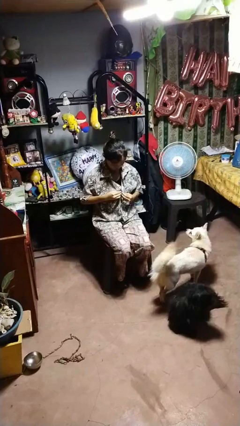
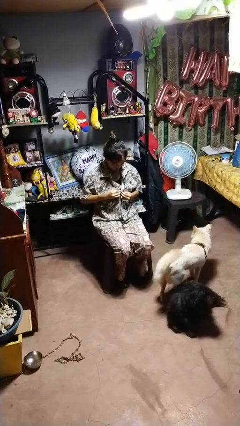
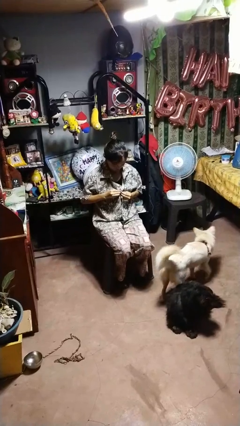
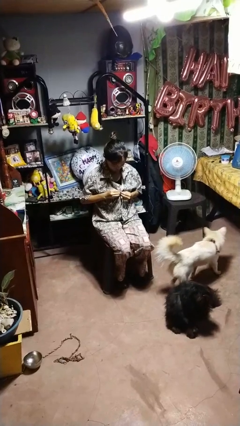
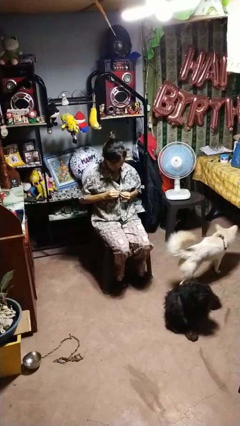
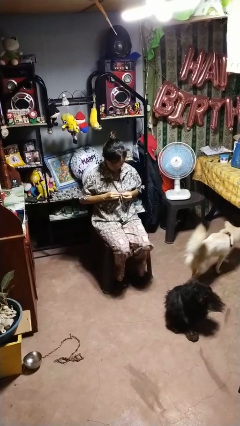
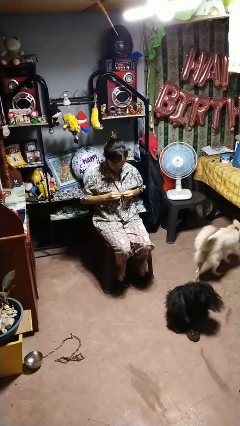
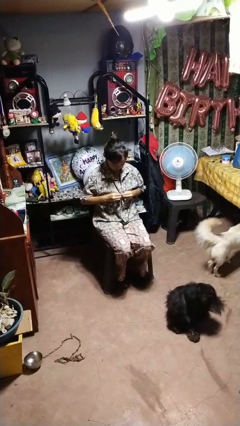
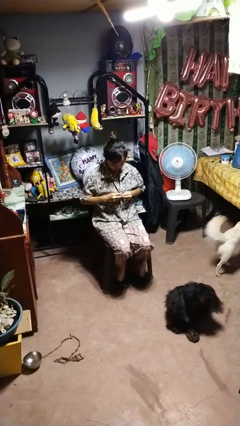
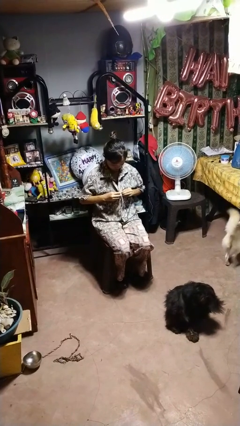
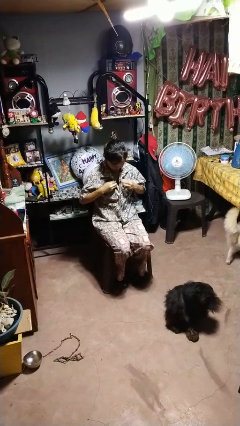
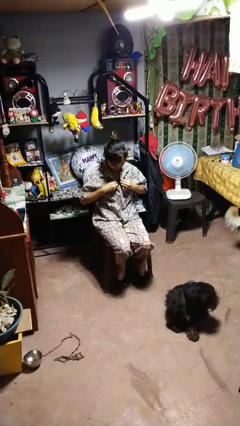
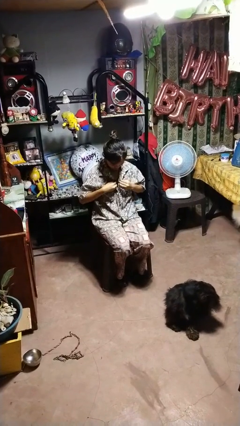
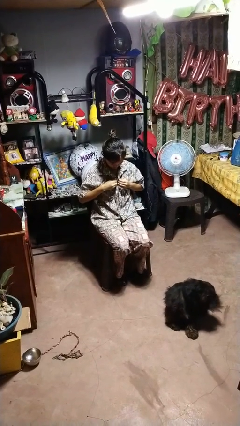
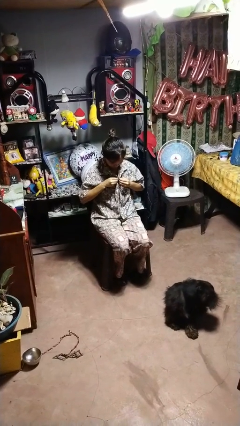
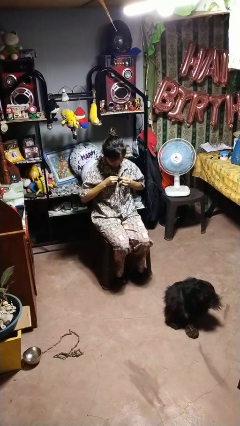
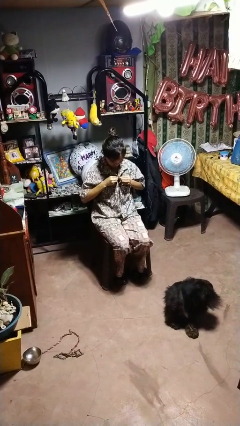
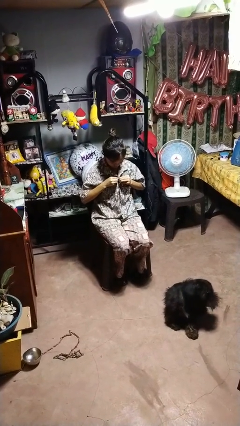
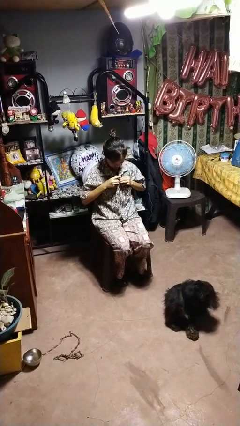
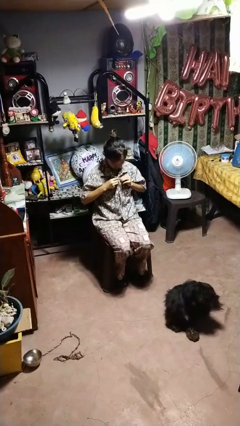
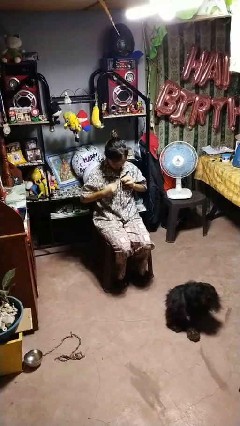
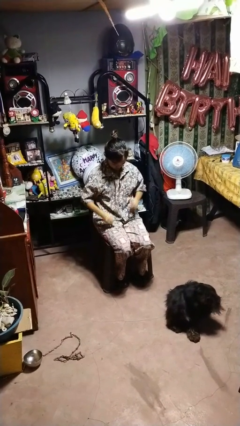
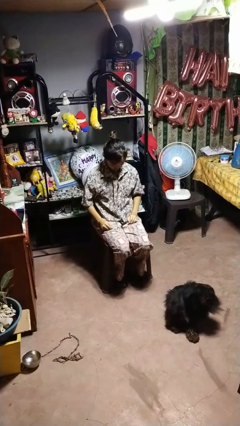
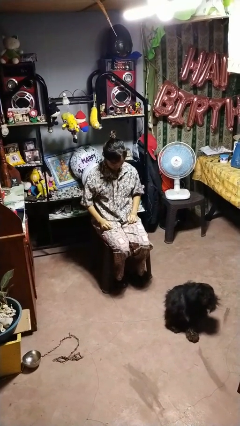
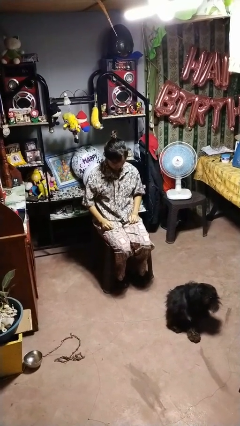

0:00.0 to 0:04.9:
person buttons shirt

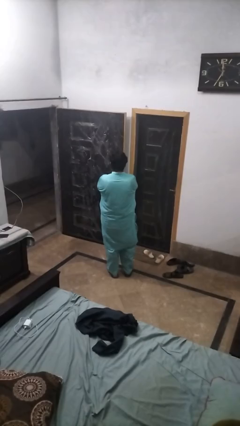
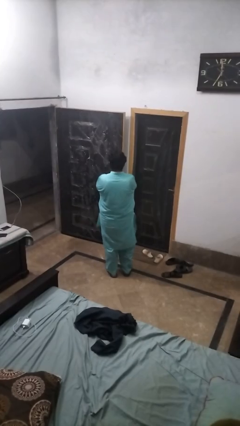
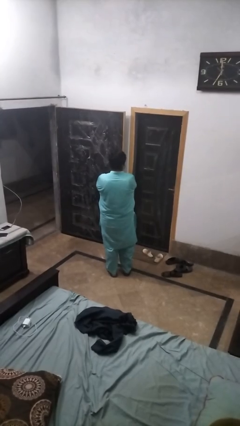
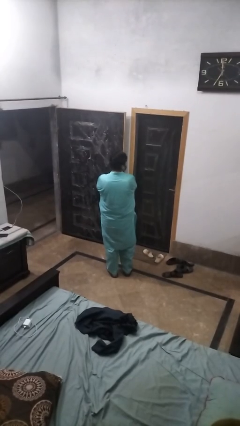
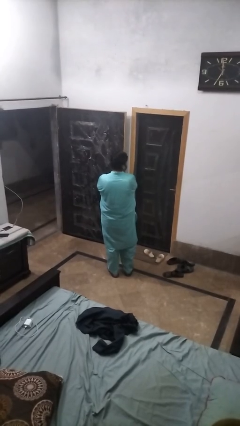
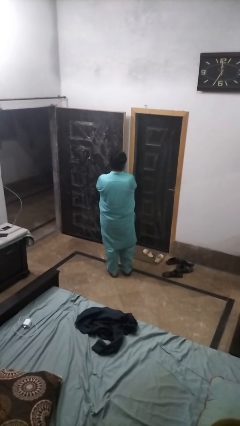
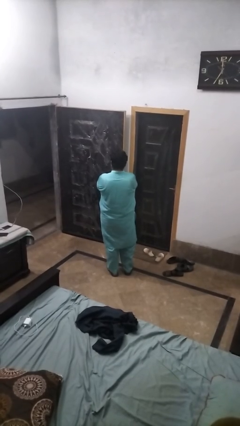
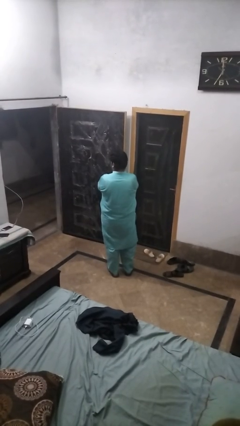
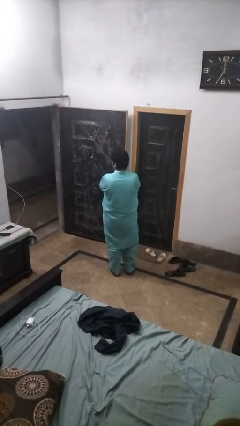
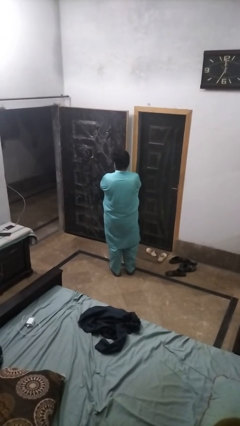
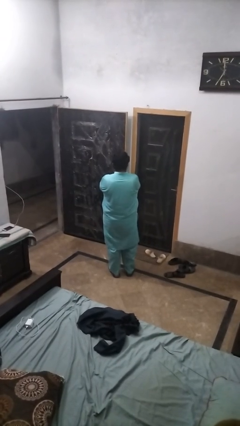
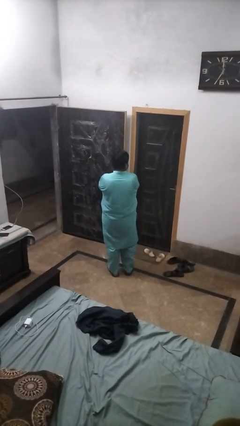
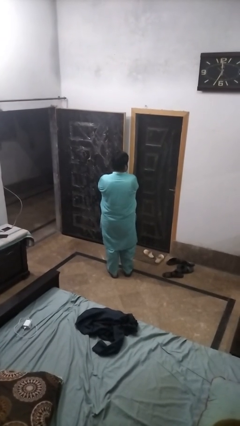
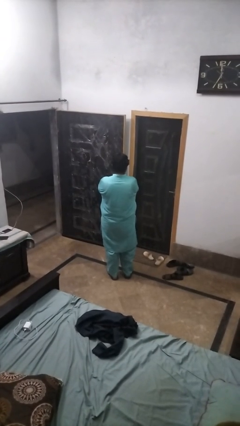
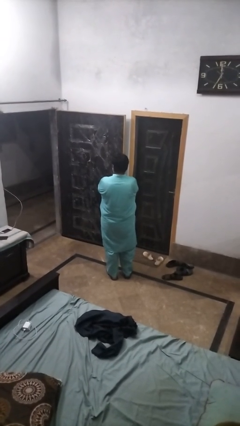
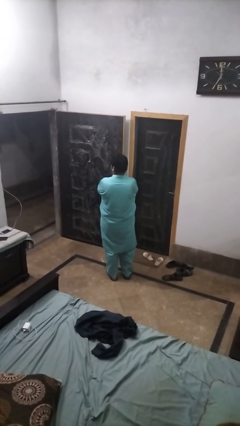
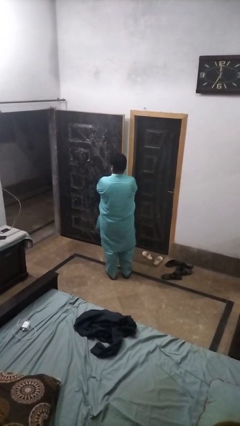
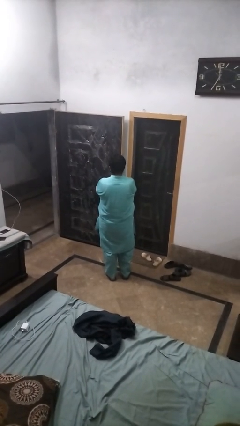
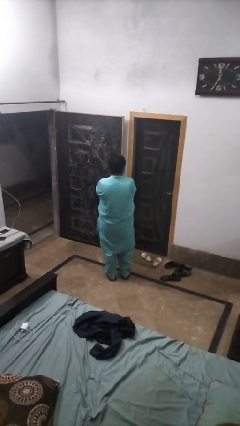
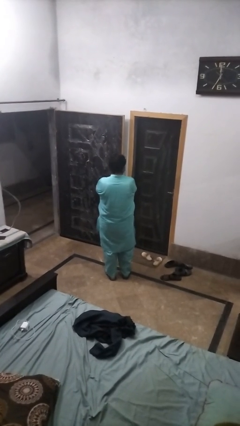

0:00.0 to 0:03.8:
person shakes head

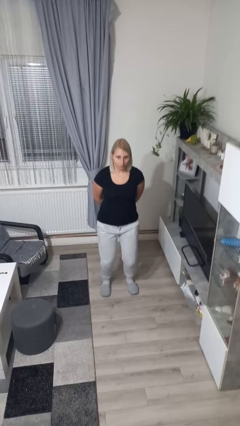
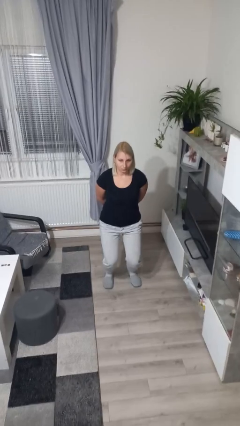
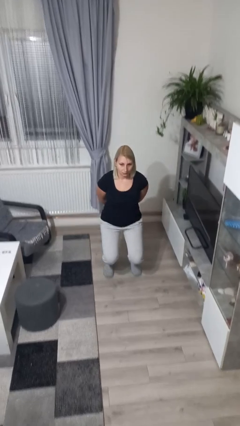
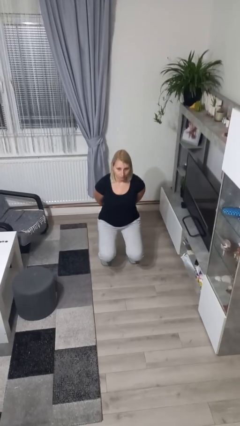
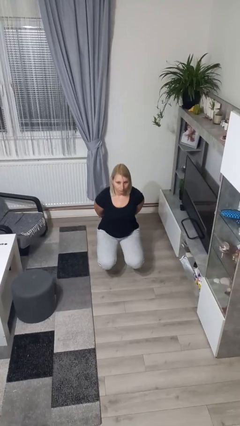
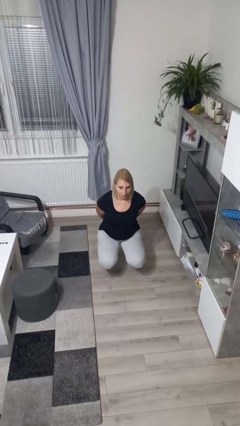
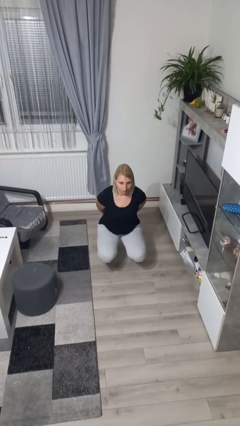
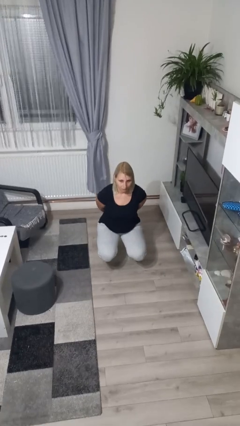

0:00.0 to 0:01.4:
person squats

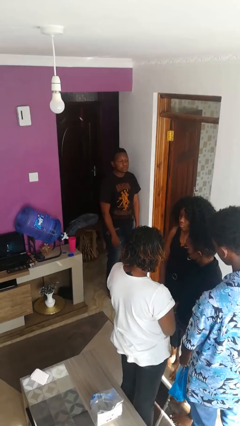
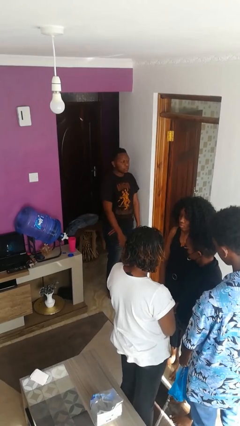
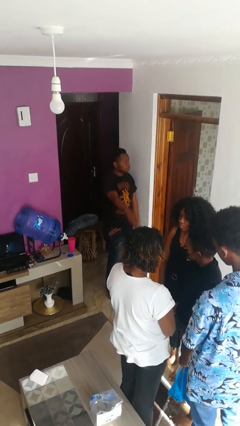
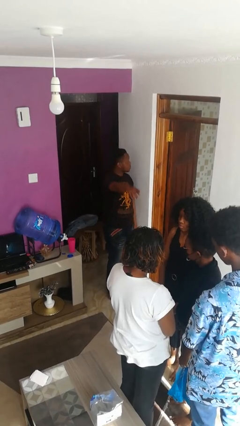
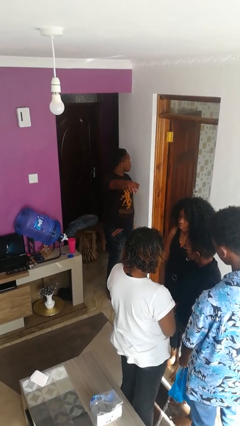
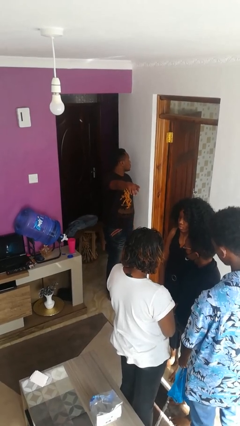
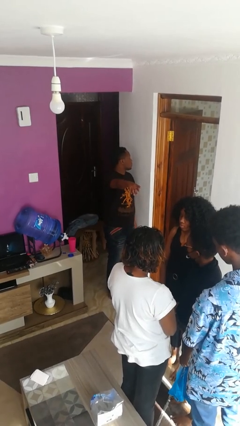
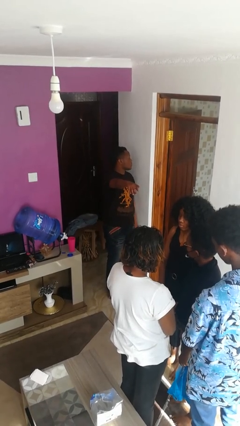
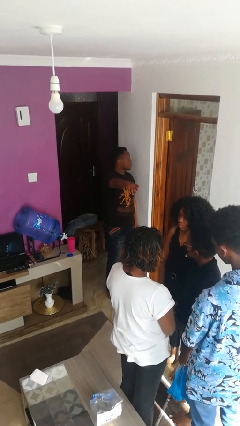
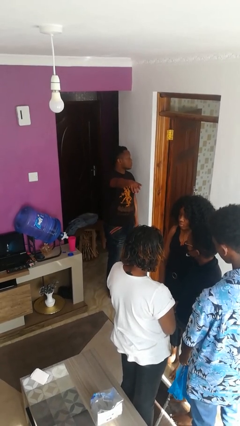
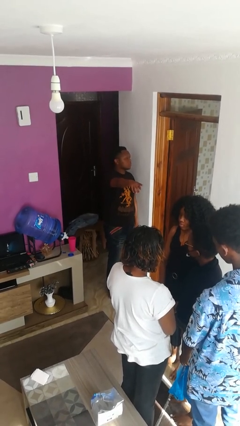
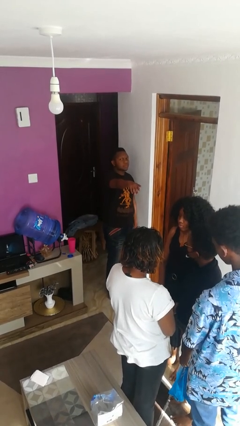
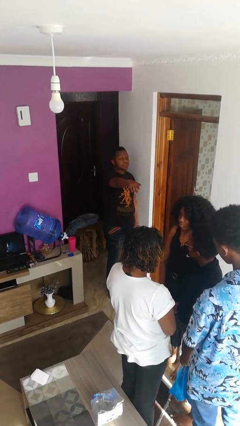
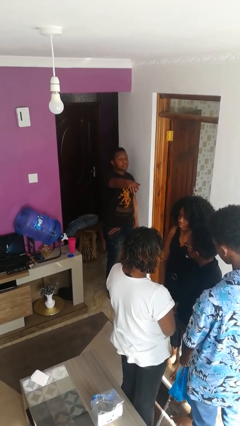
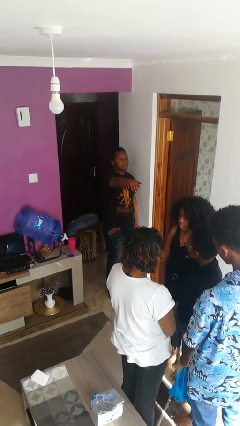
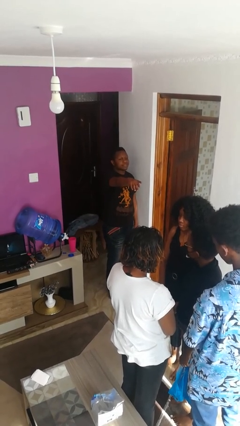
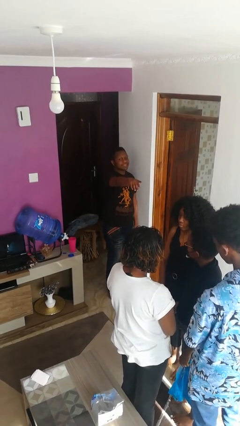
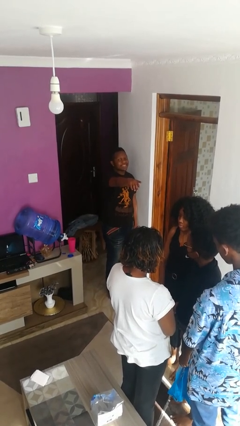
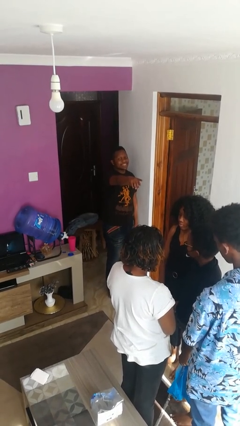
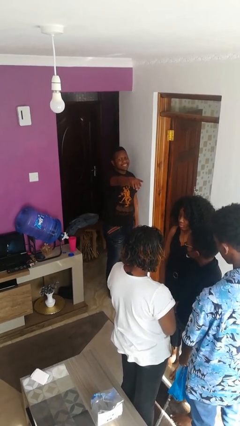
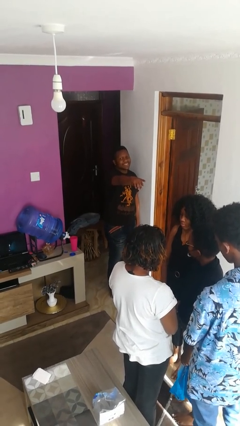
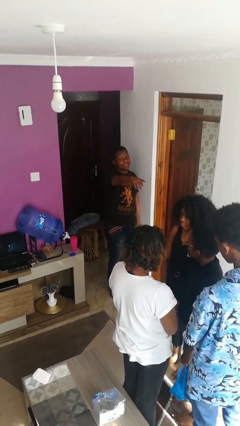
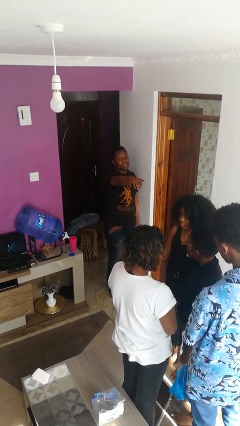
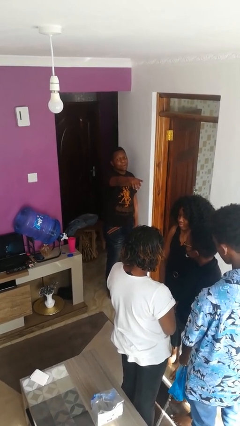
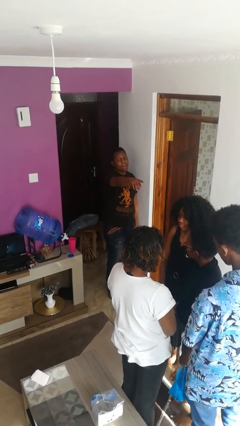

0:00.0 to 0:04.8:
person points at person

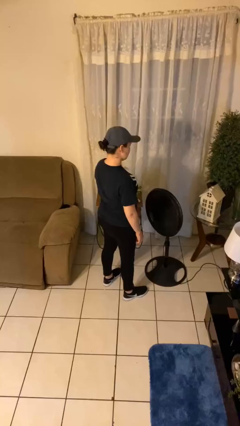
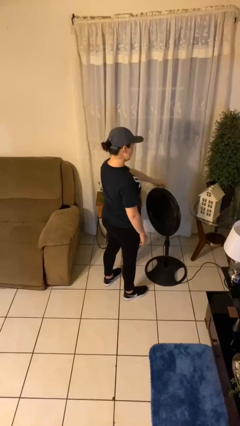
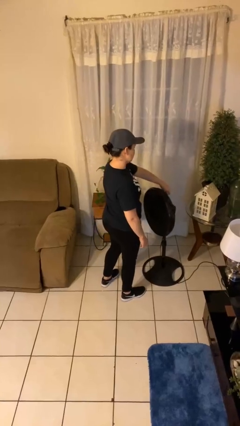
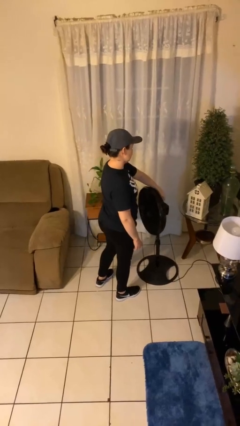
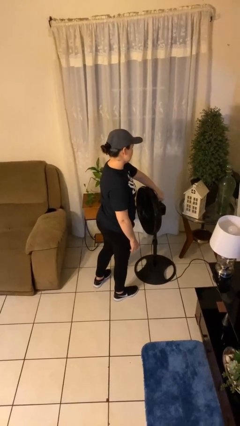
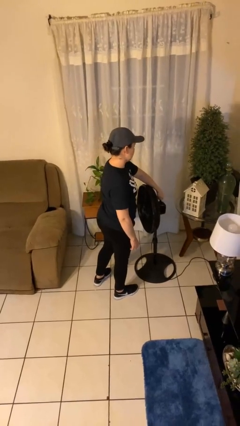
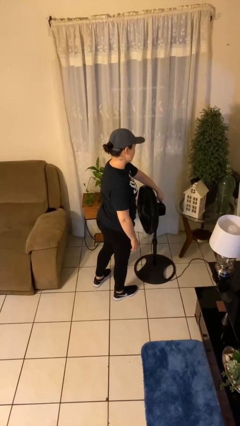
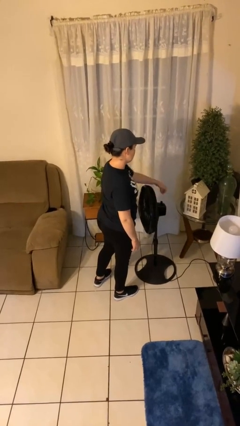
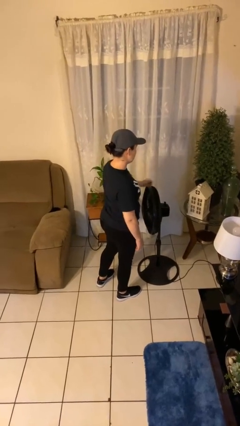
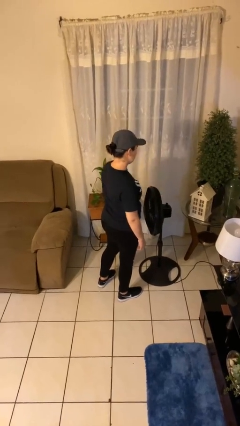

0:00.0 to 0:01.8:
person turns off fan

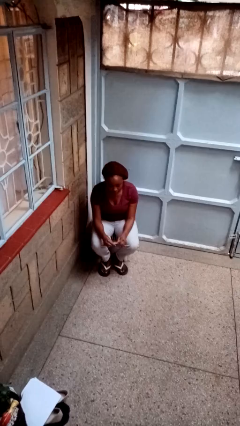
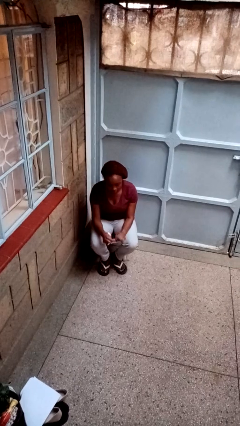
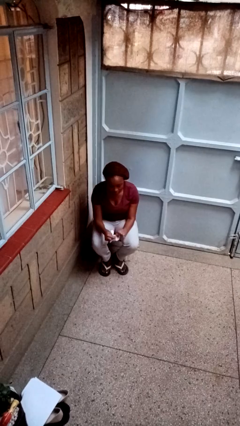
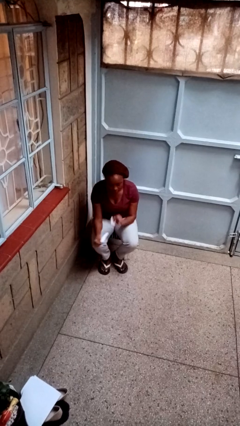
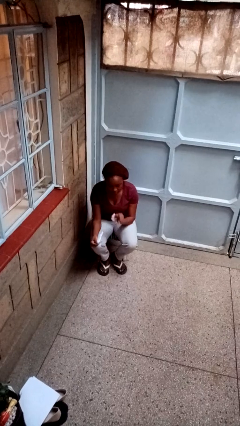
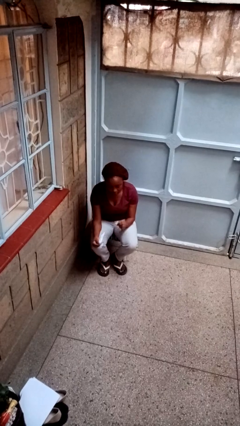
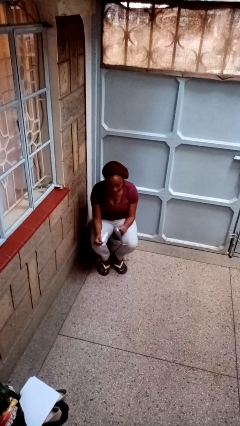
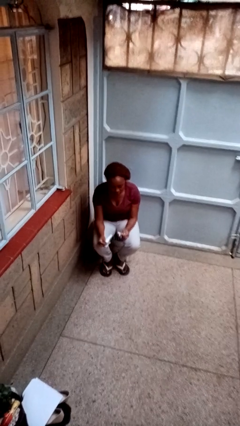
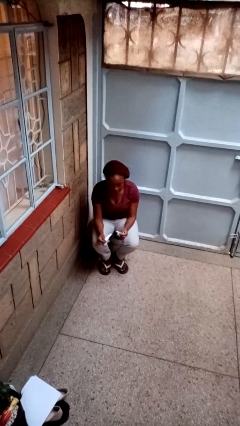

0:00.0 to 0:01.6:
person tears paper
